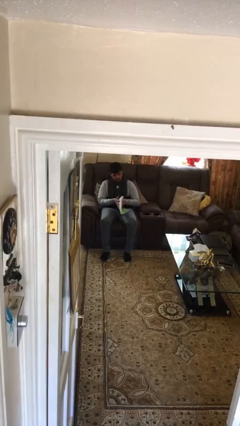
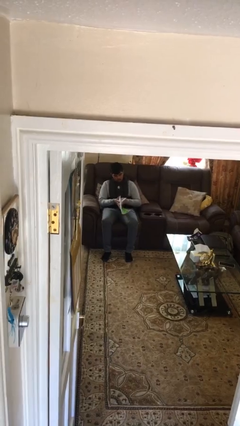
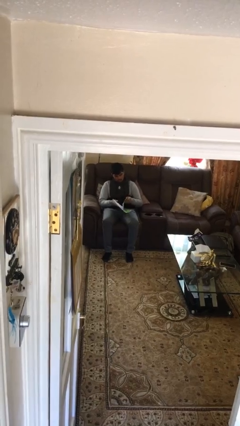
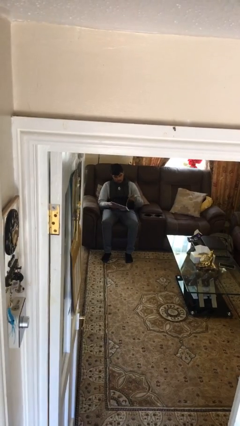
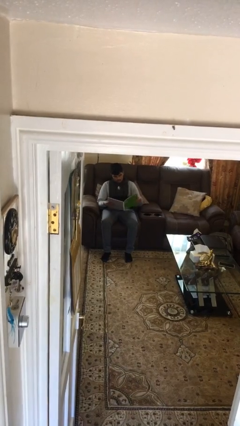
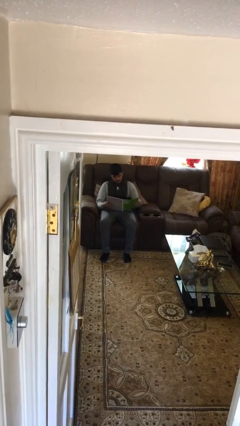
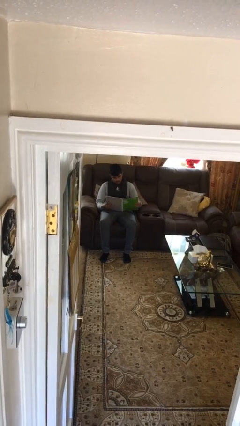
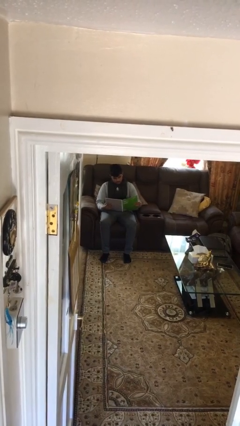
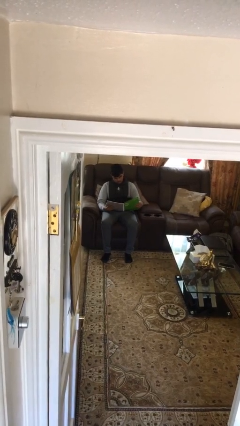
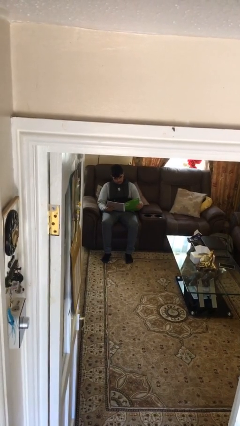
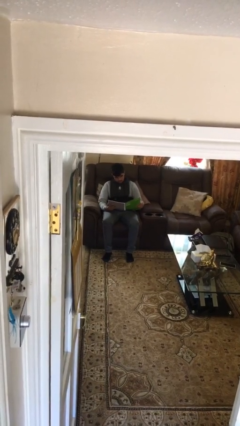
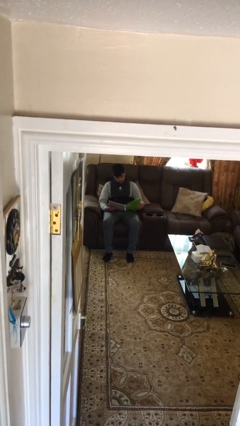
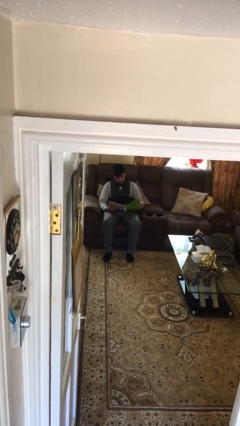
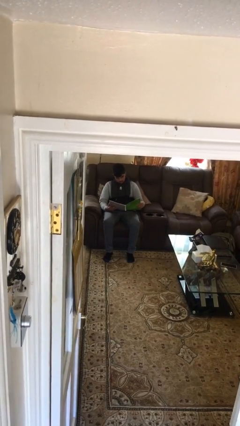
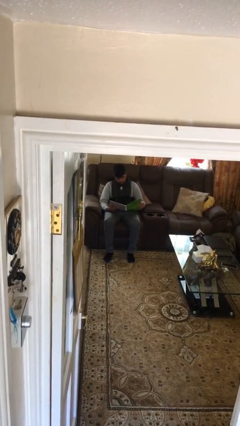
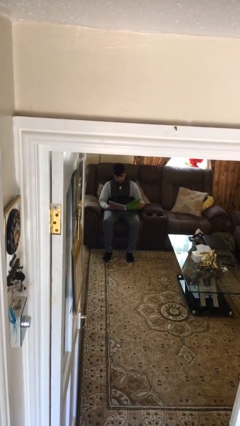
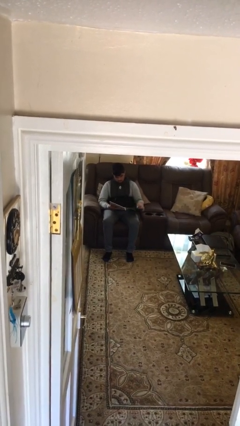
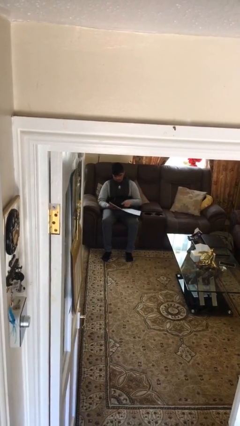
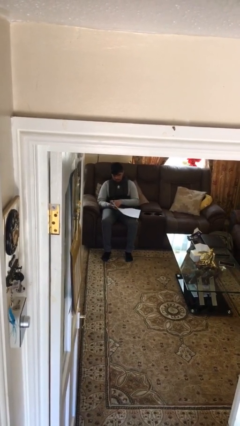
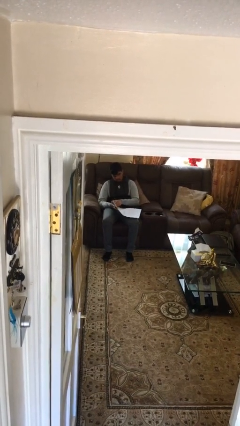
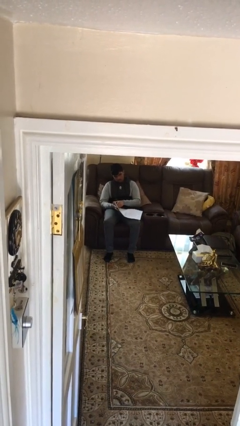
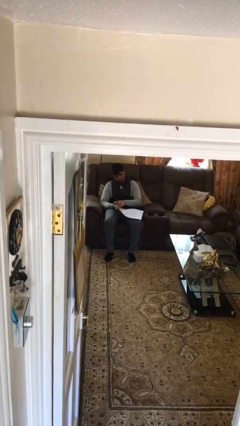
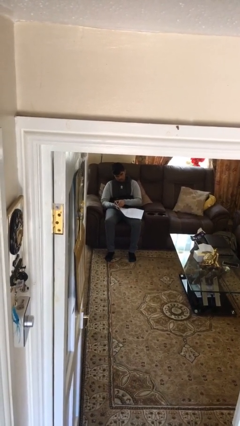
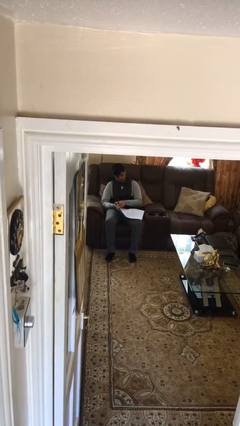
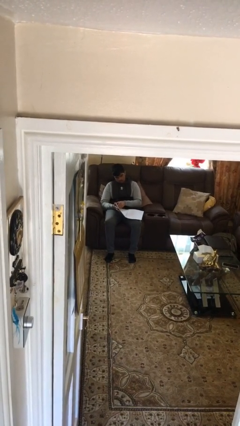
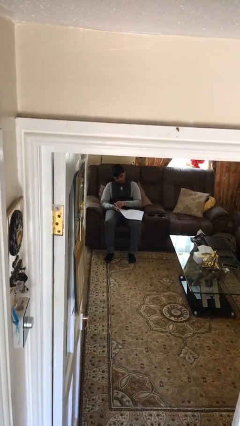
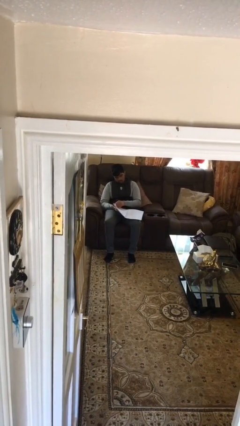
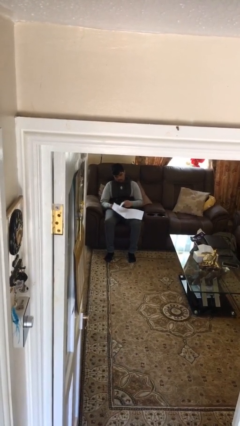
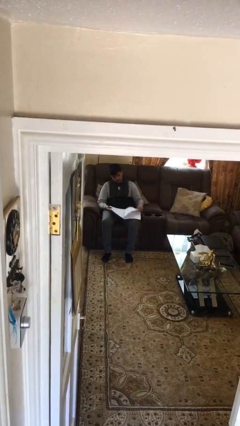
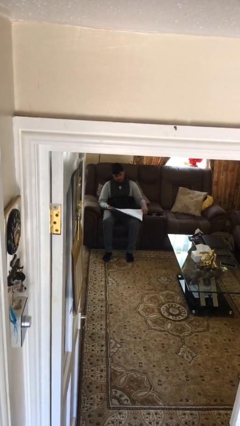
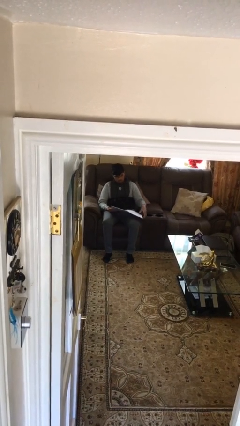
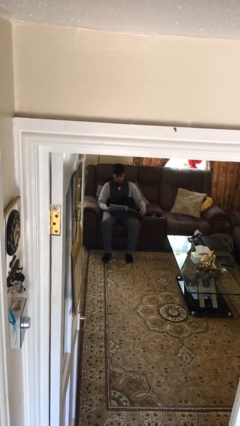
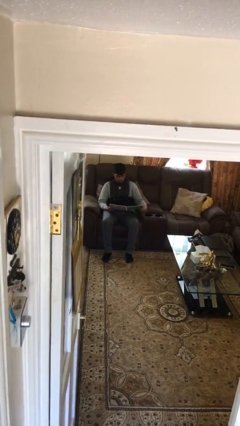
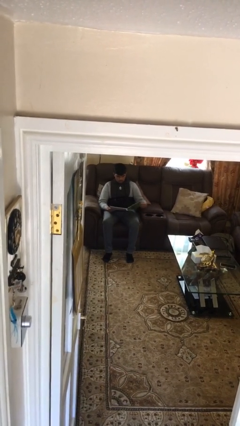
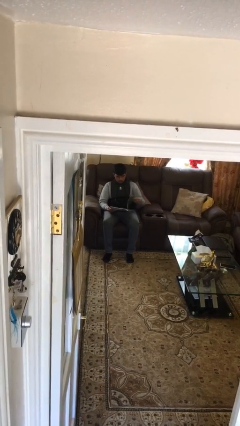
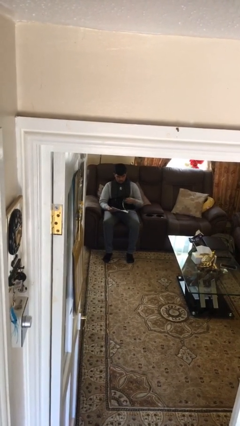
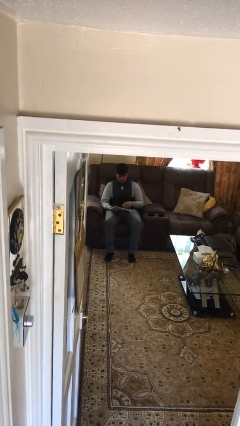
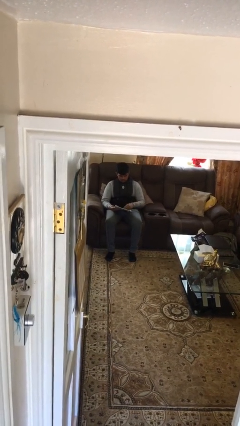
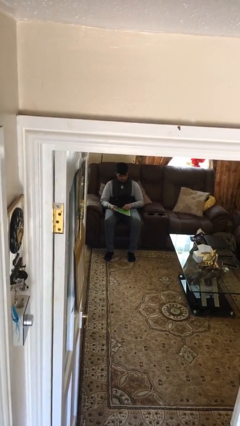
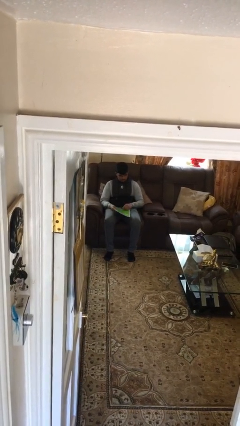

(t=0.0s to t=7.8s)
person reads document

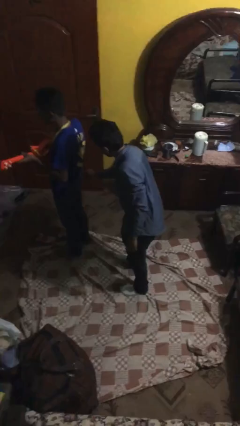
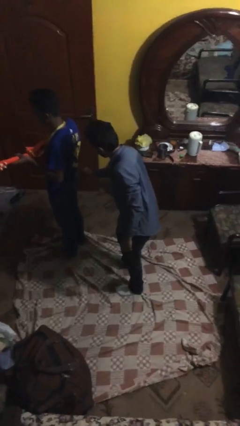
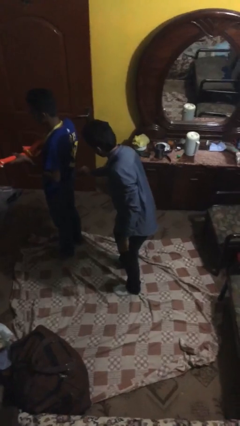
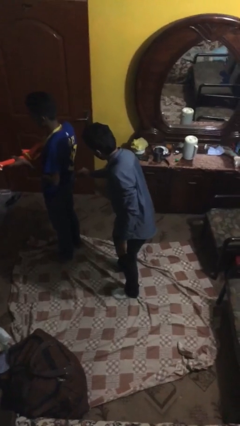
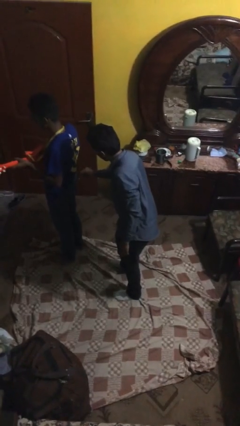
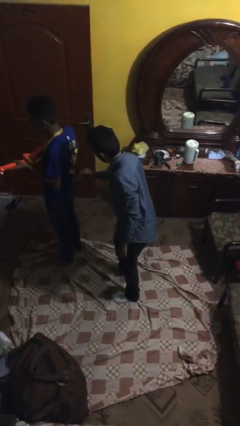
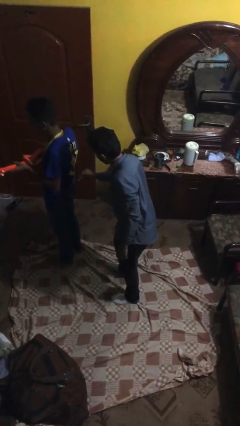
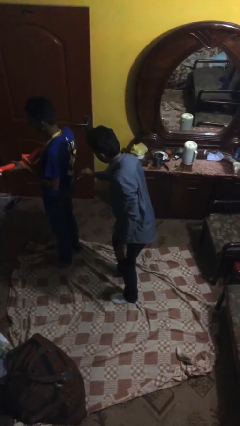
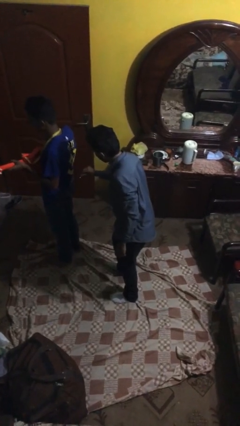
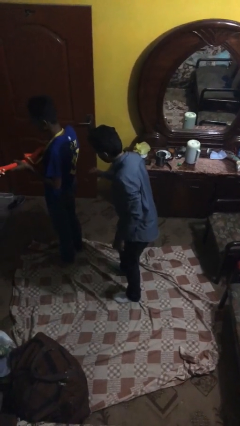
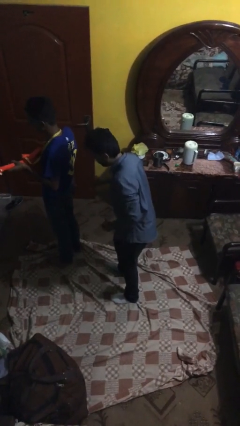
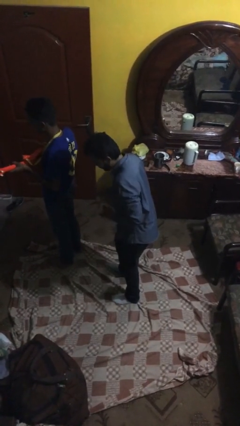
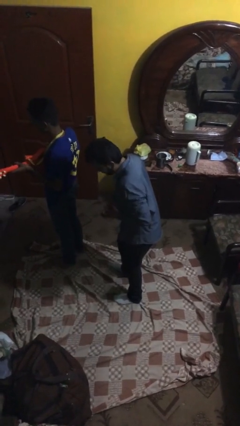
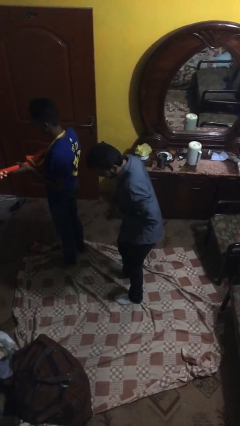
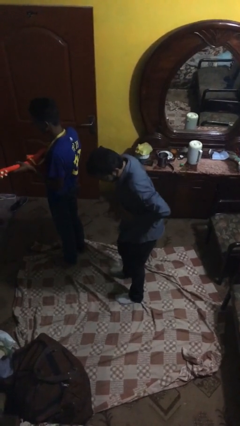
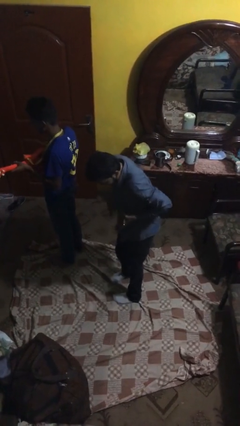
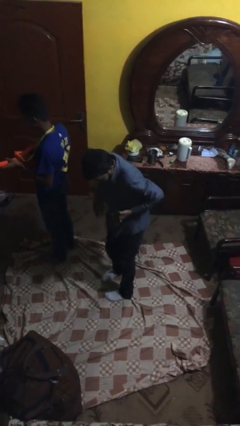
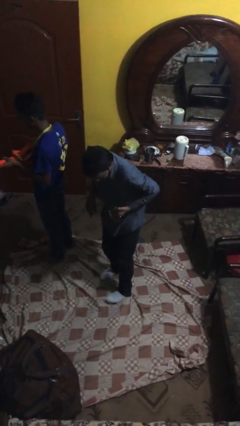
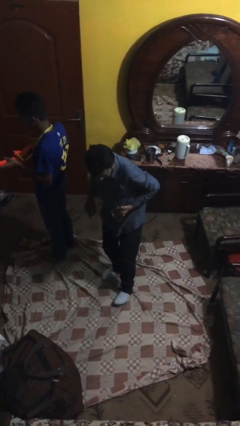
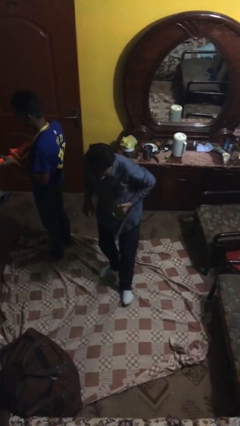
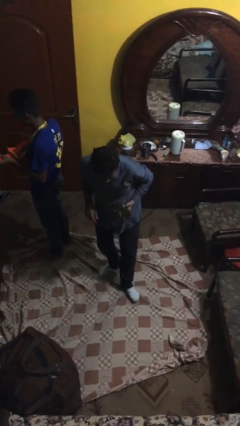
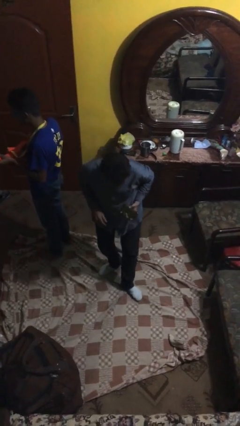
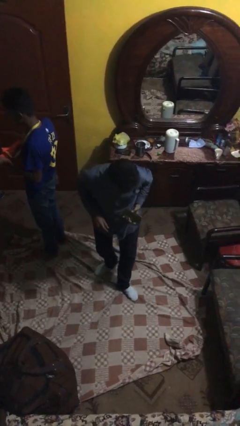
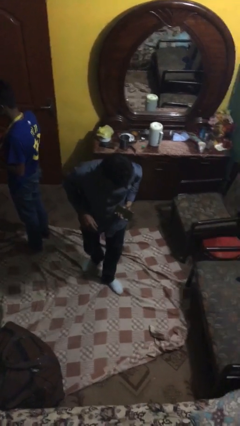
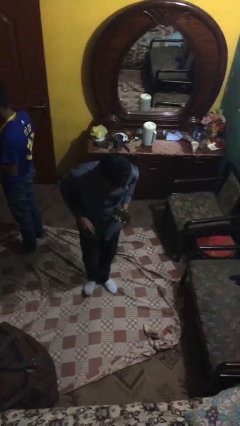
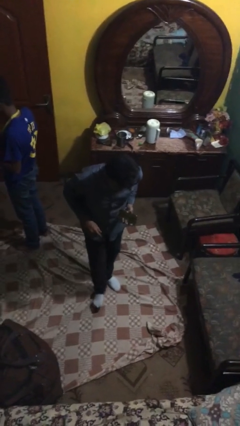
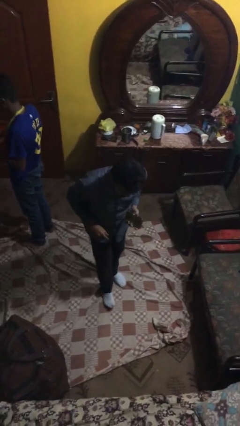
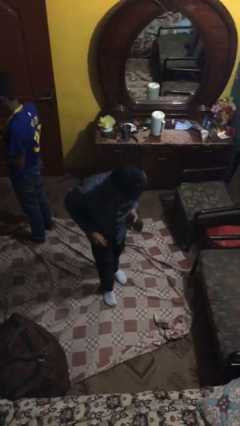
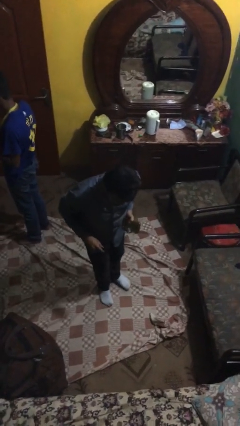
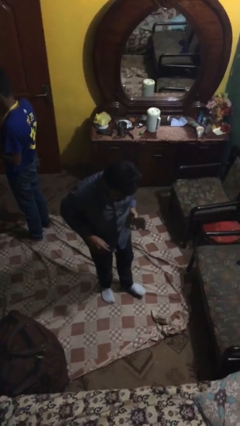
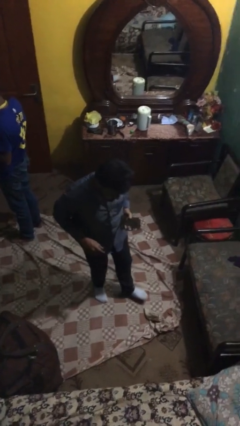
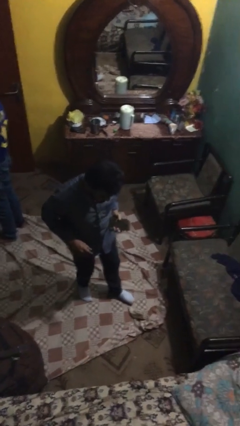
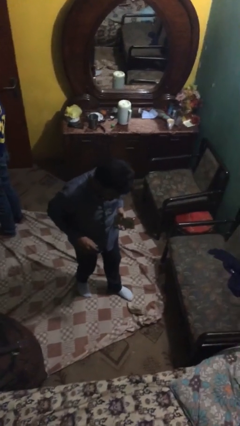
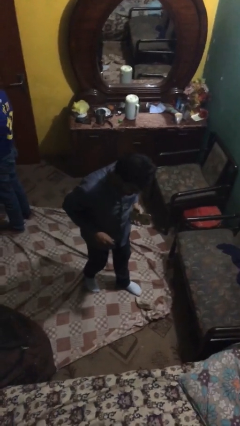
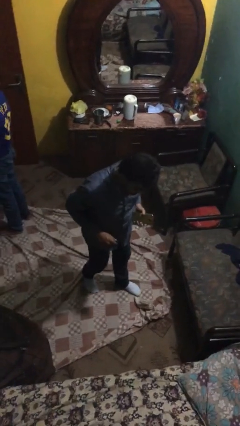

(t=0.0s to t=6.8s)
person steals object from person

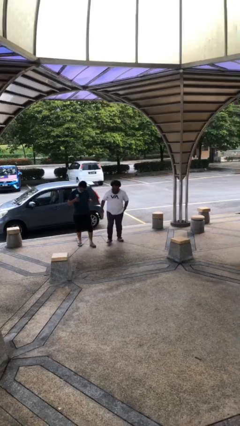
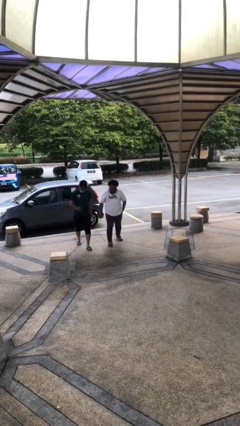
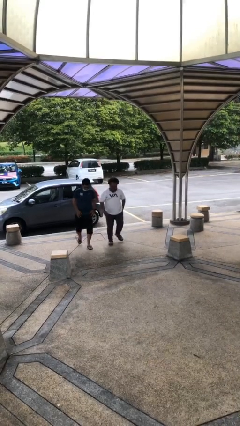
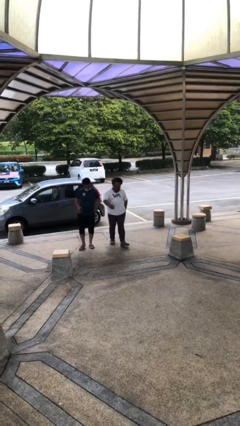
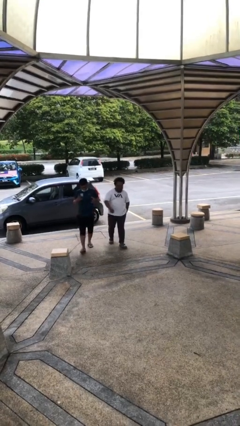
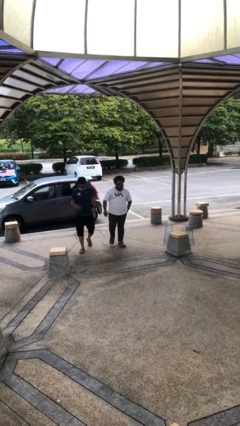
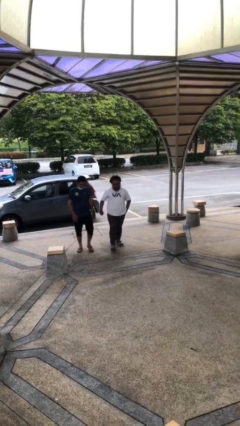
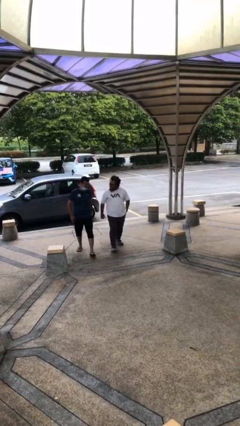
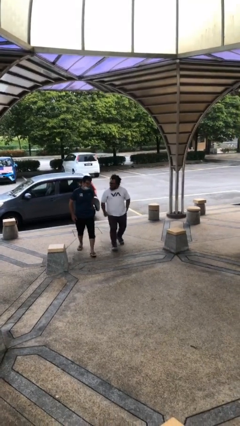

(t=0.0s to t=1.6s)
person talks to person

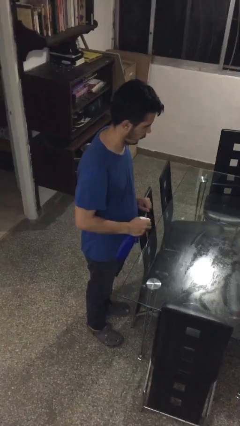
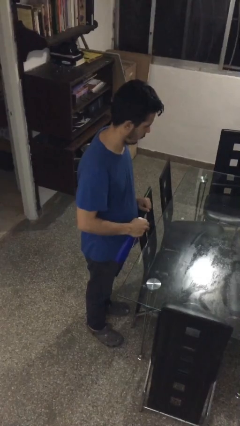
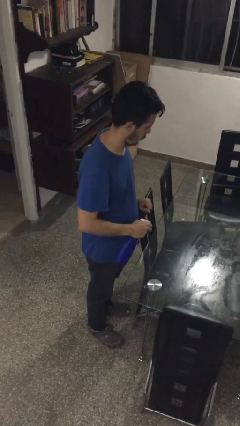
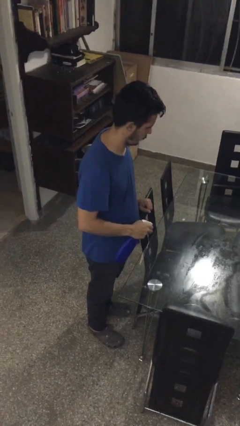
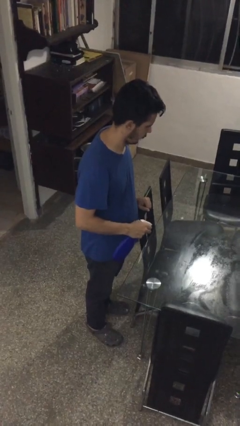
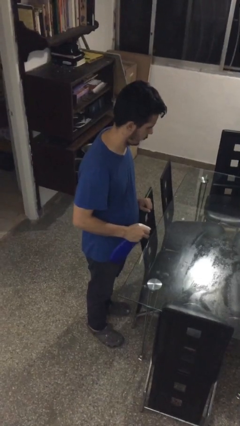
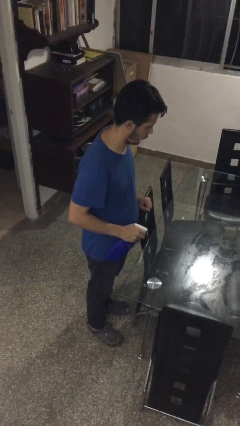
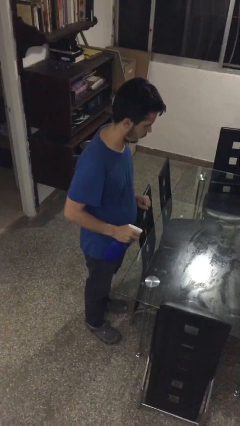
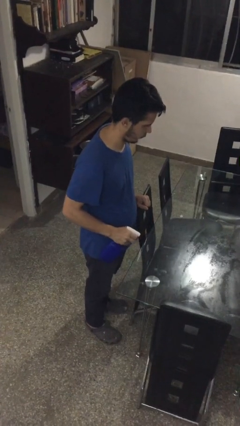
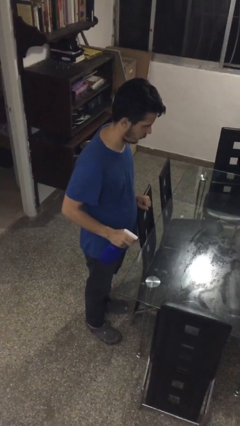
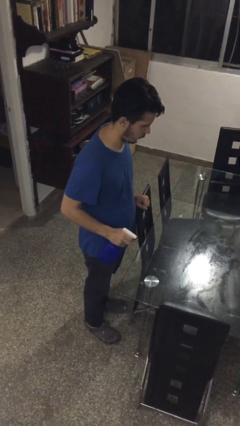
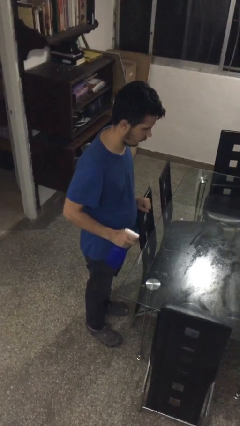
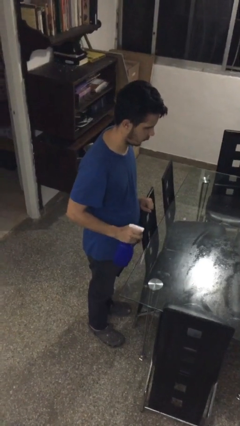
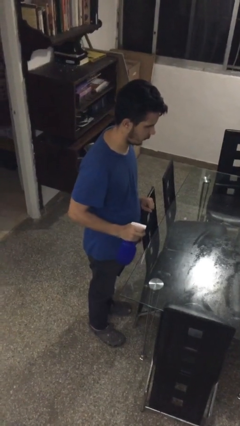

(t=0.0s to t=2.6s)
person sprays from bottle
